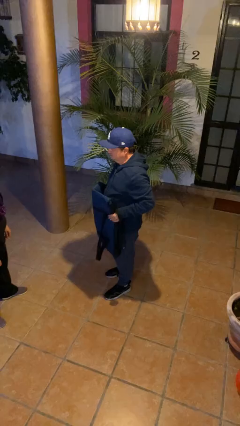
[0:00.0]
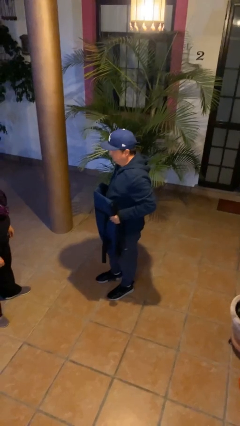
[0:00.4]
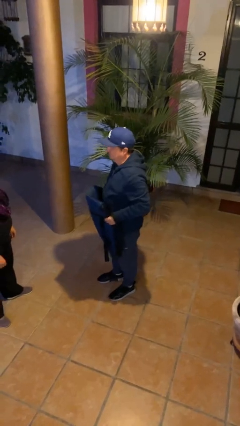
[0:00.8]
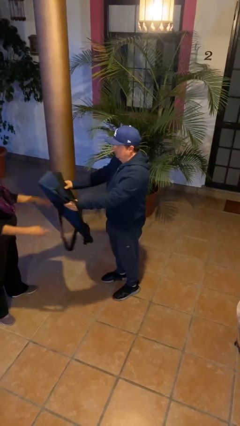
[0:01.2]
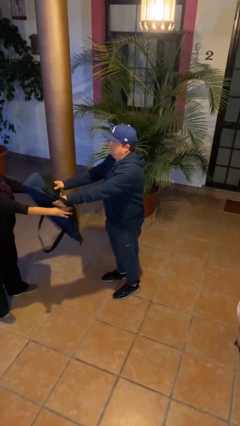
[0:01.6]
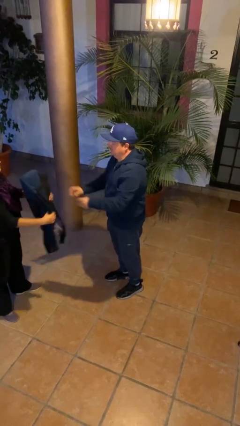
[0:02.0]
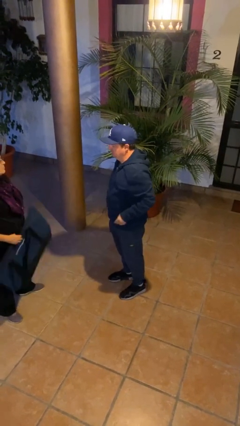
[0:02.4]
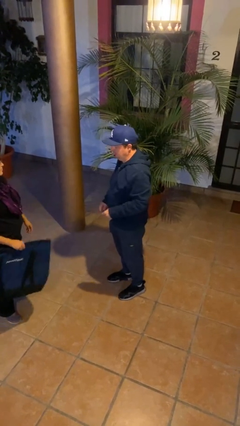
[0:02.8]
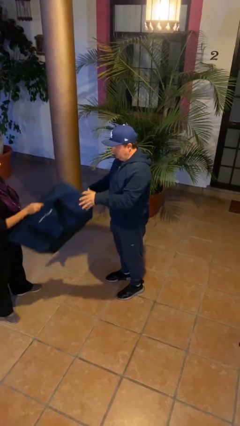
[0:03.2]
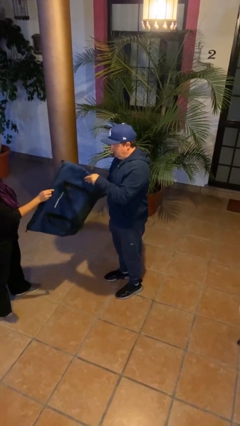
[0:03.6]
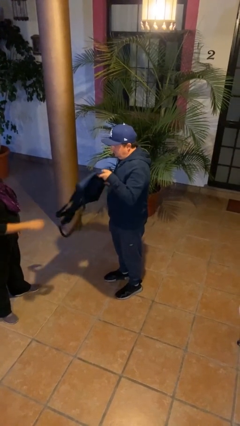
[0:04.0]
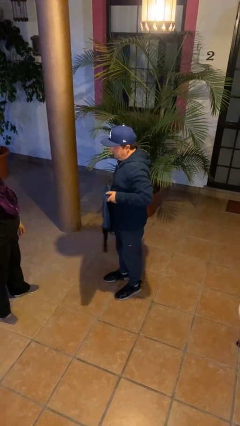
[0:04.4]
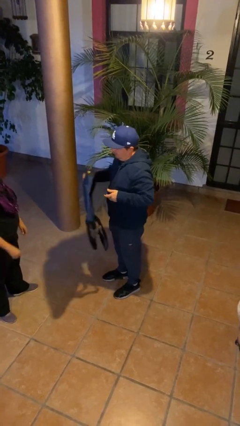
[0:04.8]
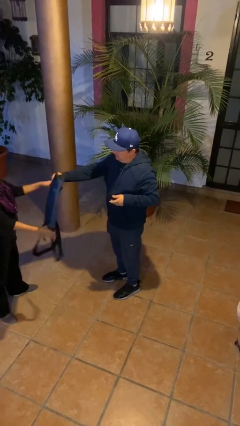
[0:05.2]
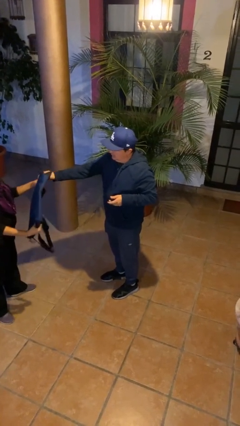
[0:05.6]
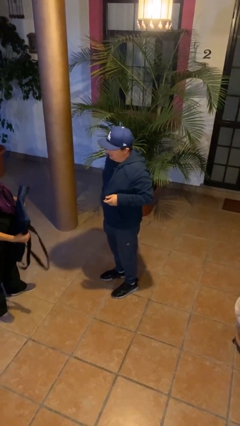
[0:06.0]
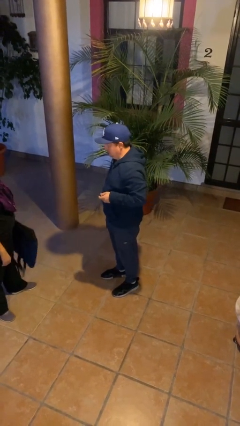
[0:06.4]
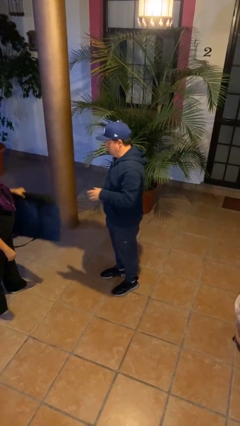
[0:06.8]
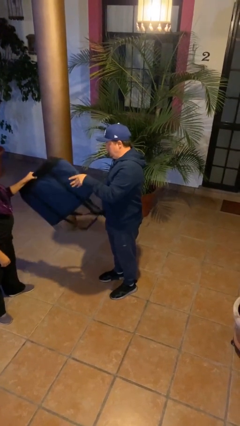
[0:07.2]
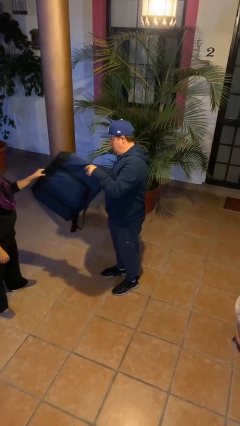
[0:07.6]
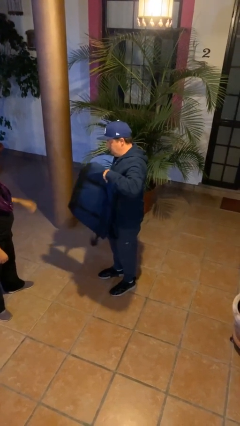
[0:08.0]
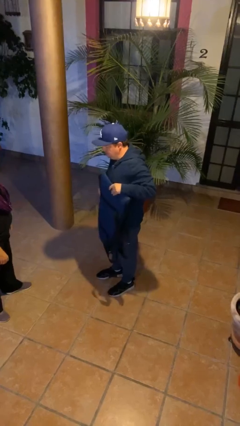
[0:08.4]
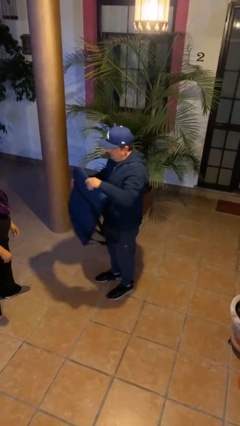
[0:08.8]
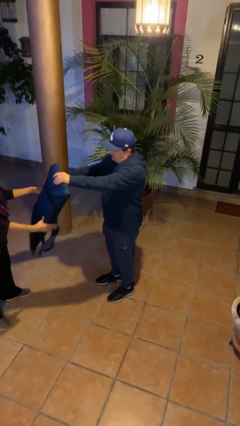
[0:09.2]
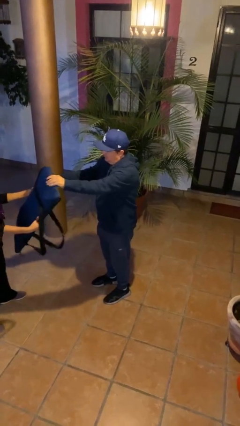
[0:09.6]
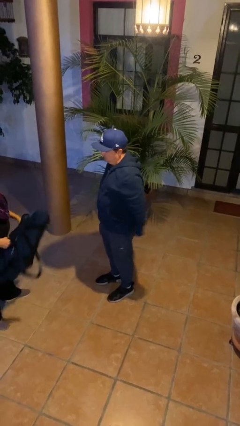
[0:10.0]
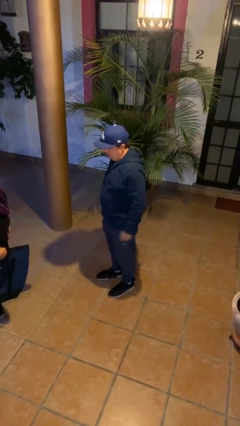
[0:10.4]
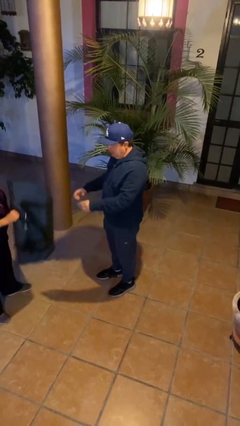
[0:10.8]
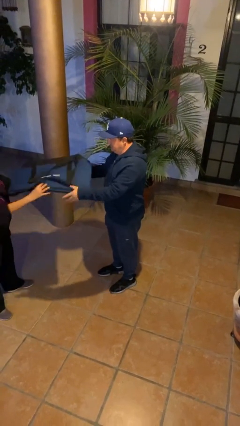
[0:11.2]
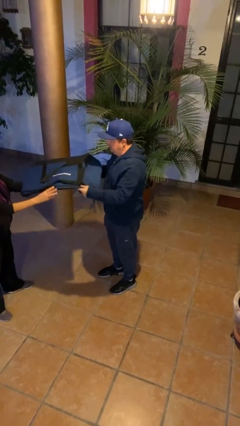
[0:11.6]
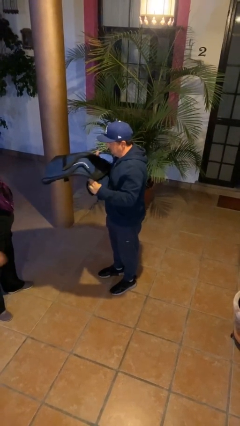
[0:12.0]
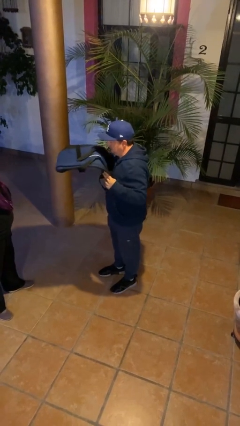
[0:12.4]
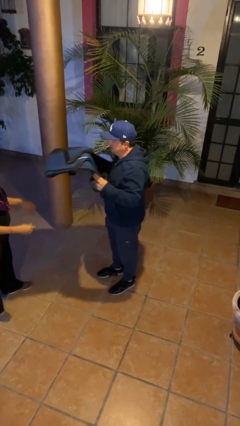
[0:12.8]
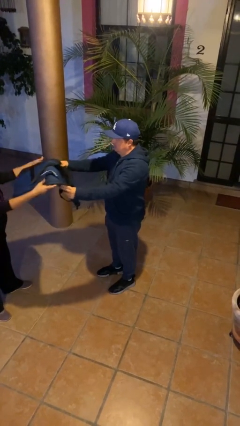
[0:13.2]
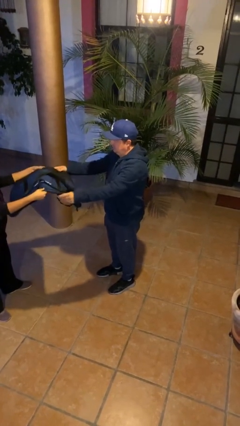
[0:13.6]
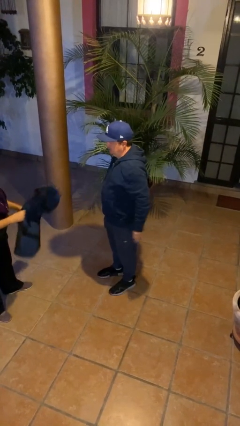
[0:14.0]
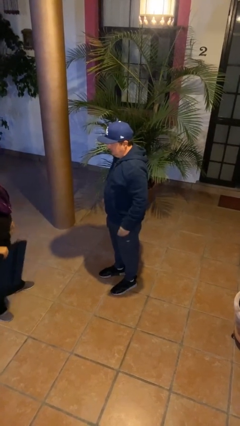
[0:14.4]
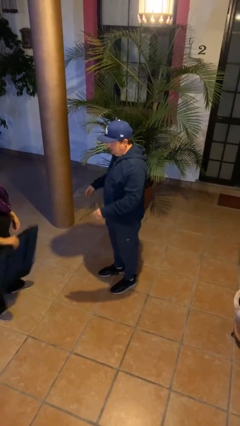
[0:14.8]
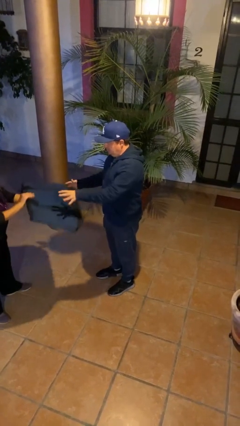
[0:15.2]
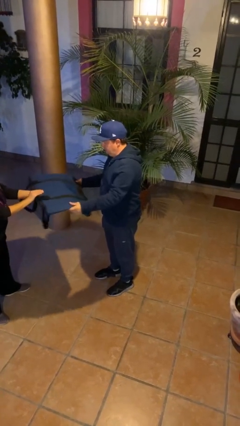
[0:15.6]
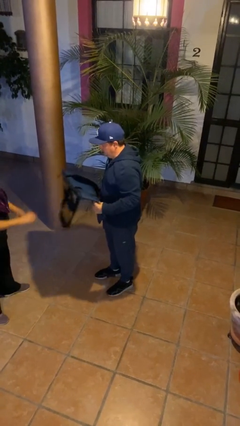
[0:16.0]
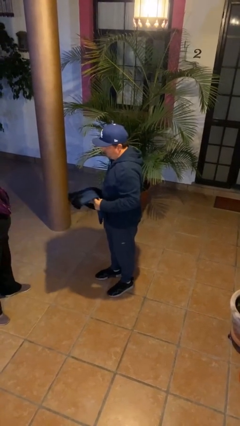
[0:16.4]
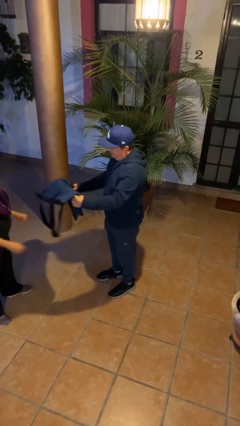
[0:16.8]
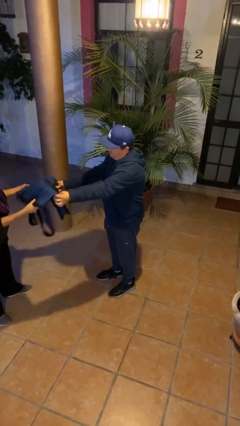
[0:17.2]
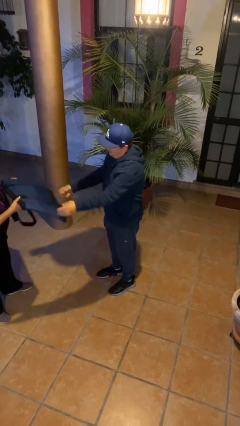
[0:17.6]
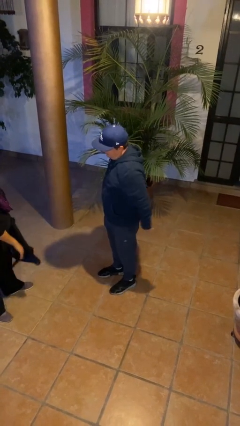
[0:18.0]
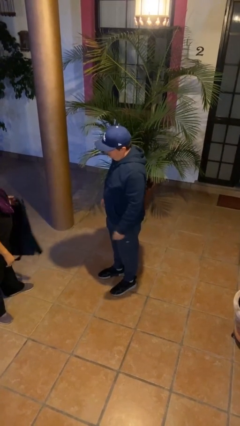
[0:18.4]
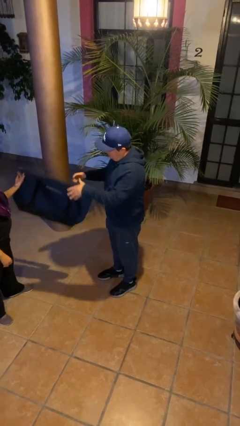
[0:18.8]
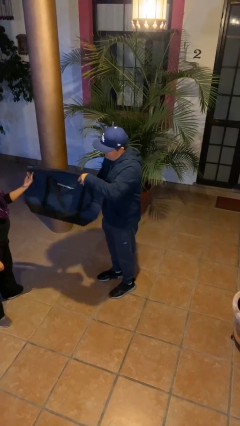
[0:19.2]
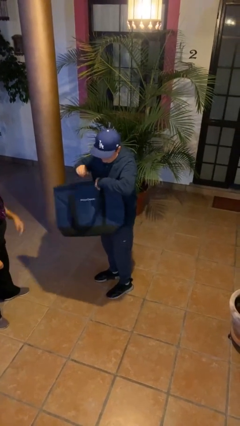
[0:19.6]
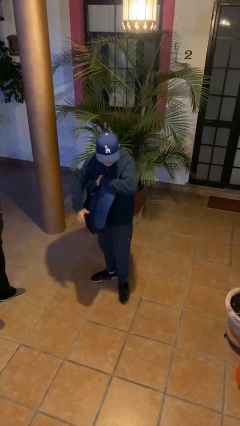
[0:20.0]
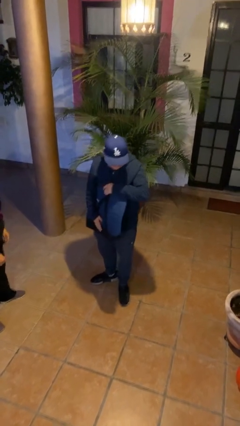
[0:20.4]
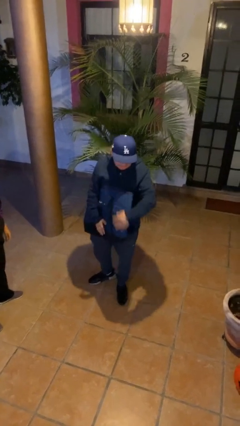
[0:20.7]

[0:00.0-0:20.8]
person transfers object to person

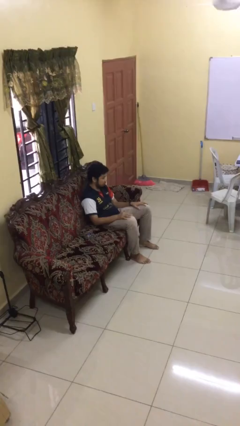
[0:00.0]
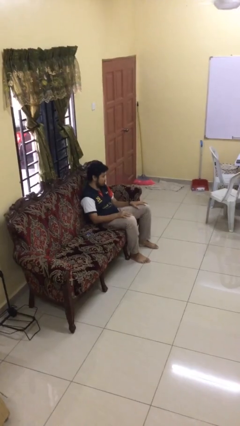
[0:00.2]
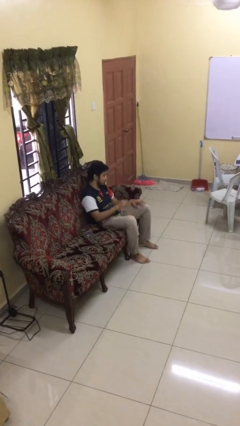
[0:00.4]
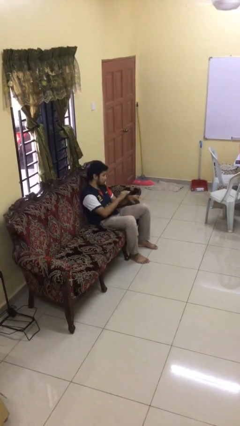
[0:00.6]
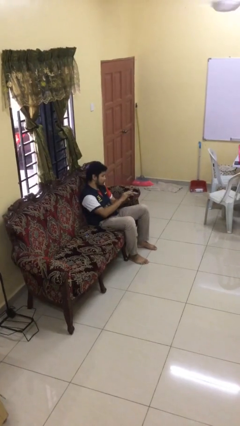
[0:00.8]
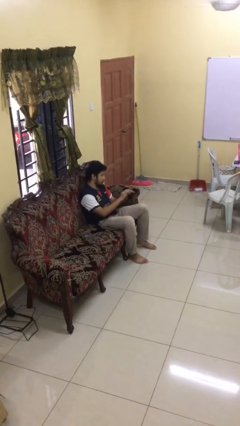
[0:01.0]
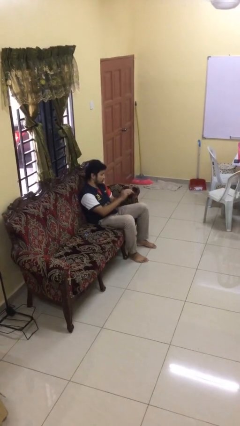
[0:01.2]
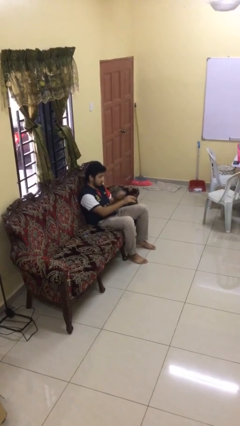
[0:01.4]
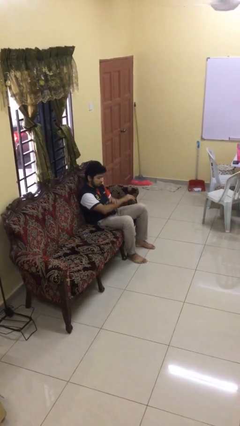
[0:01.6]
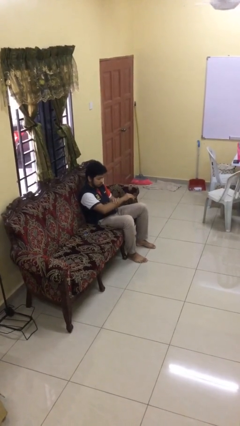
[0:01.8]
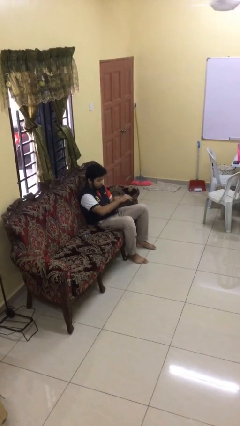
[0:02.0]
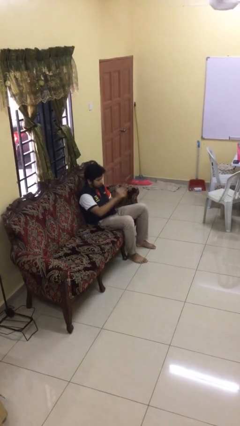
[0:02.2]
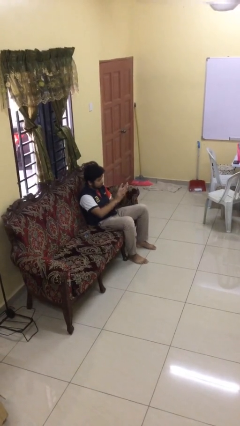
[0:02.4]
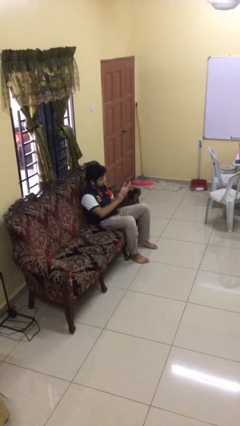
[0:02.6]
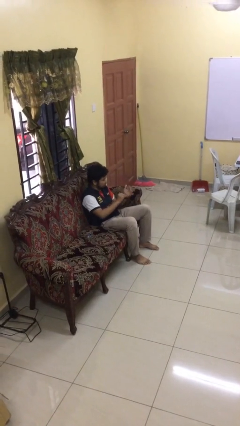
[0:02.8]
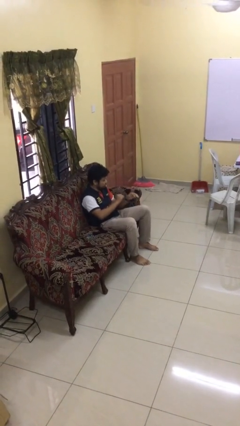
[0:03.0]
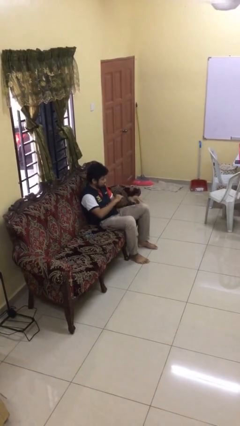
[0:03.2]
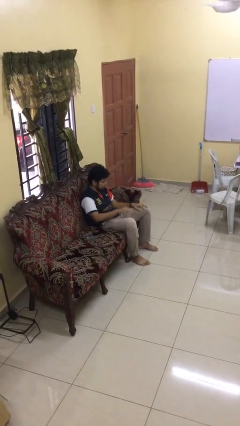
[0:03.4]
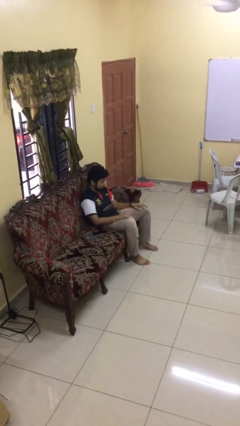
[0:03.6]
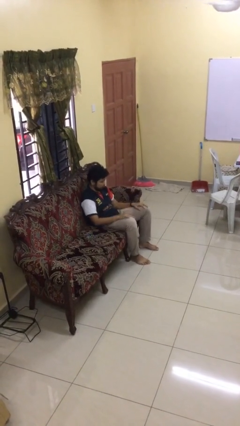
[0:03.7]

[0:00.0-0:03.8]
person looks at hands in lap

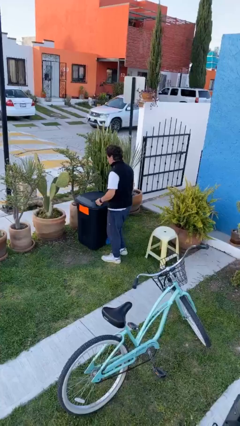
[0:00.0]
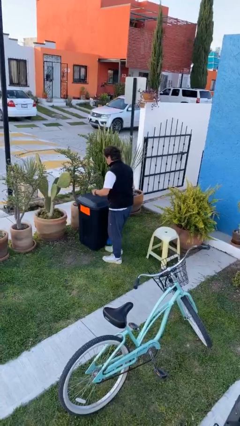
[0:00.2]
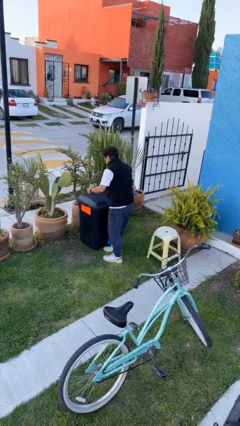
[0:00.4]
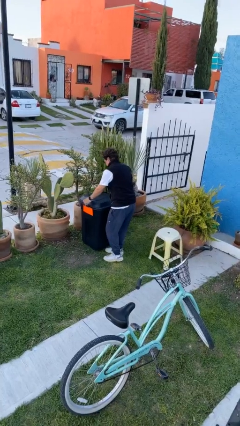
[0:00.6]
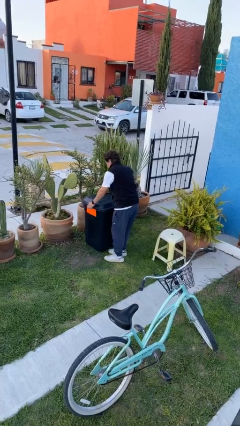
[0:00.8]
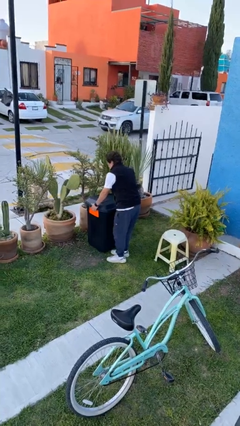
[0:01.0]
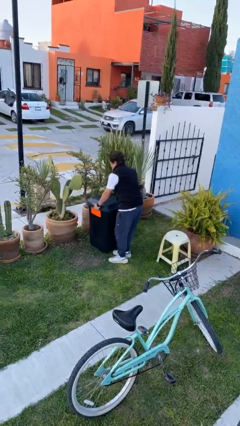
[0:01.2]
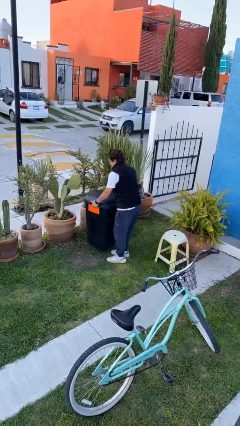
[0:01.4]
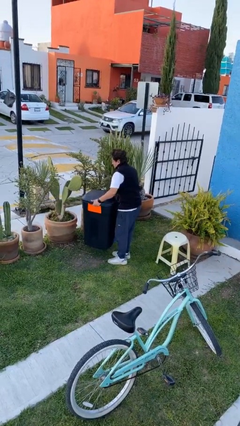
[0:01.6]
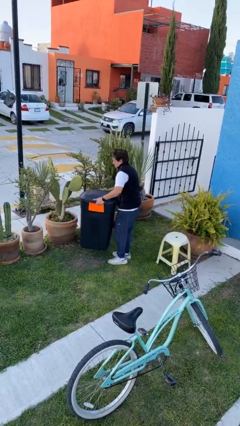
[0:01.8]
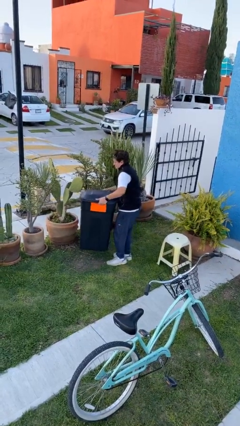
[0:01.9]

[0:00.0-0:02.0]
person picks up object from floor

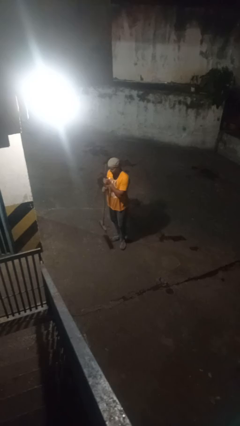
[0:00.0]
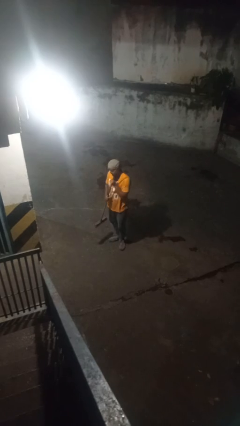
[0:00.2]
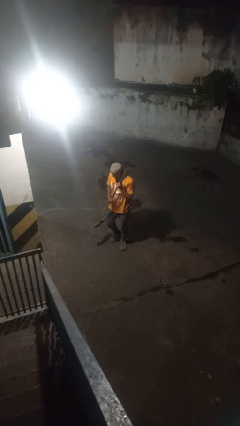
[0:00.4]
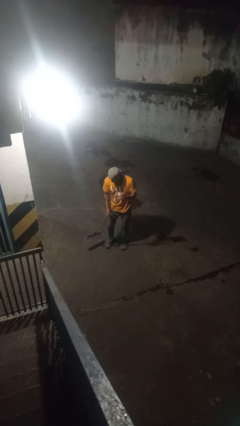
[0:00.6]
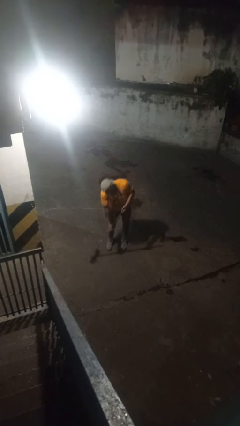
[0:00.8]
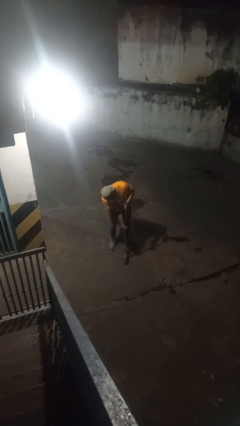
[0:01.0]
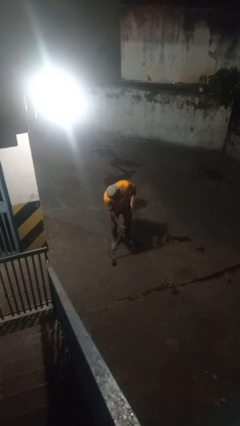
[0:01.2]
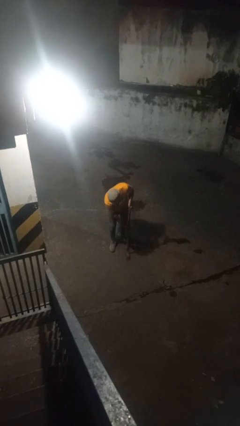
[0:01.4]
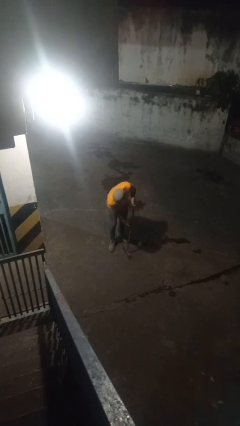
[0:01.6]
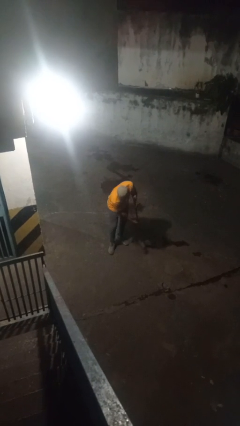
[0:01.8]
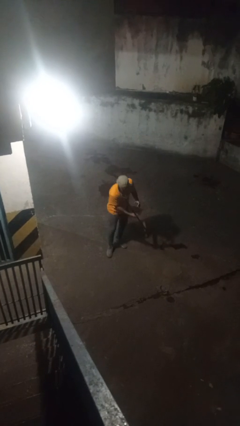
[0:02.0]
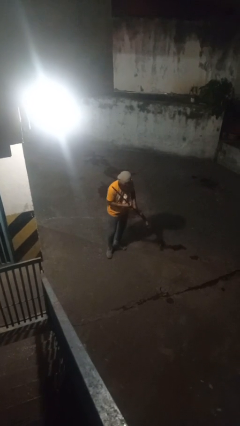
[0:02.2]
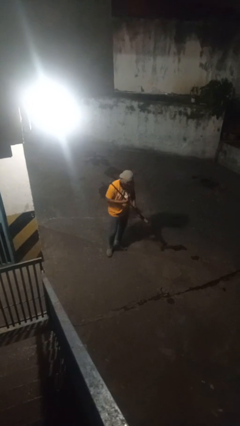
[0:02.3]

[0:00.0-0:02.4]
person sweeps floor
